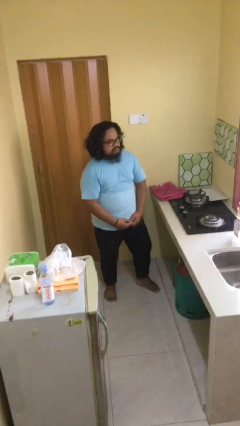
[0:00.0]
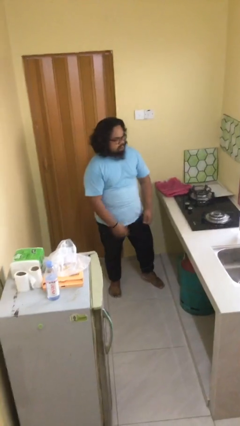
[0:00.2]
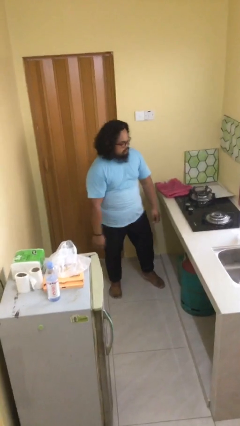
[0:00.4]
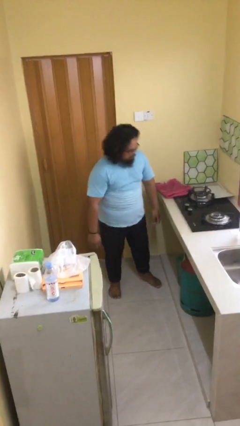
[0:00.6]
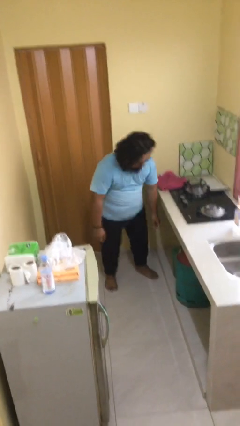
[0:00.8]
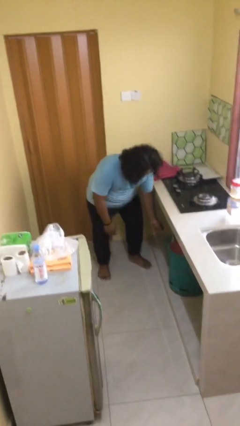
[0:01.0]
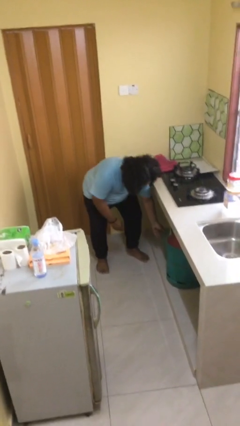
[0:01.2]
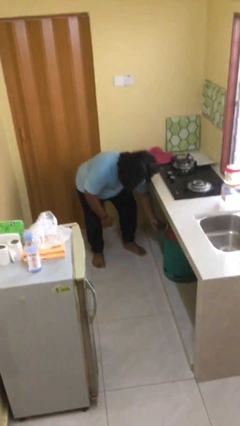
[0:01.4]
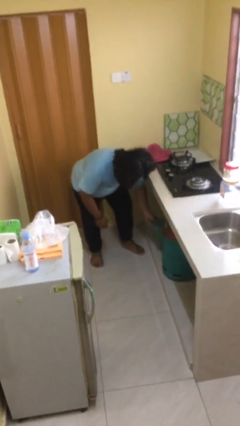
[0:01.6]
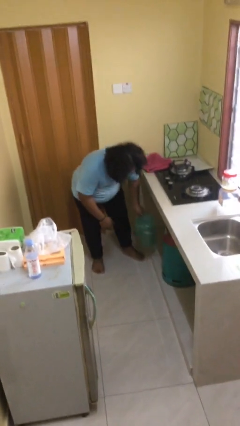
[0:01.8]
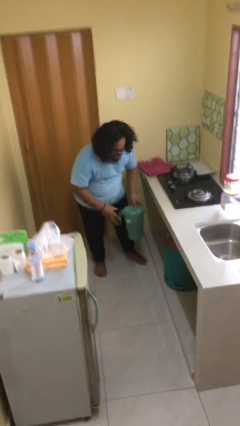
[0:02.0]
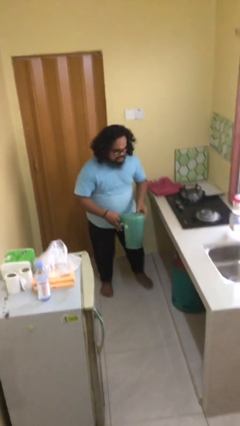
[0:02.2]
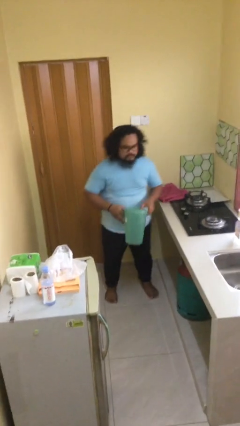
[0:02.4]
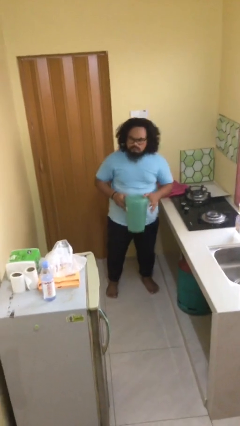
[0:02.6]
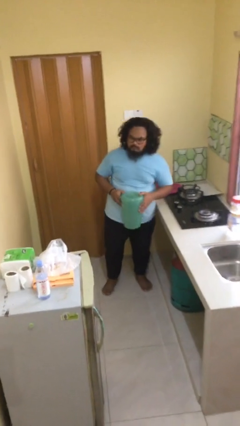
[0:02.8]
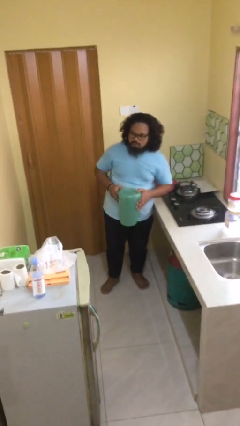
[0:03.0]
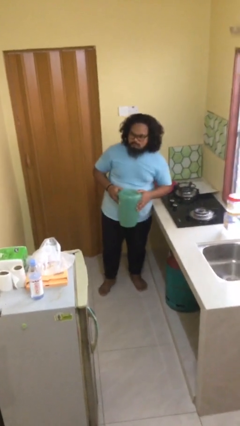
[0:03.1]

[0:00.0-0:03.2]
person picks up object from cabinet

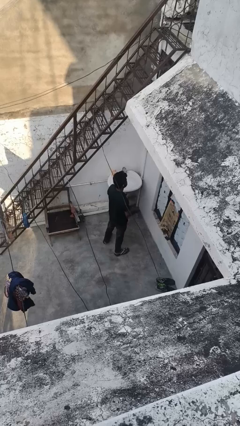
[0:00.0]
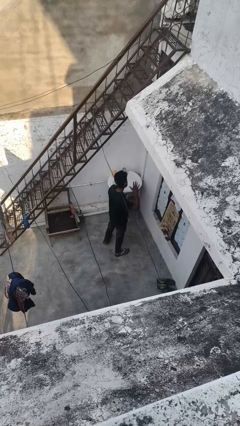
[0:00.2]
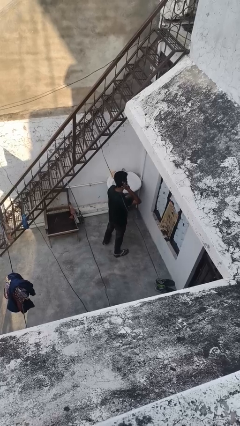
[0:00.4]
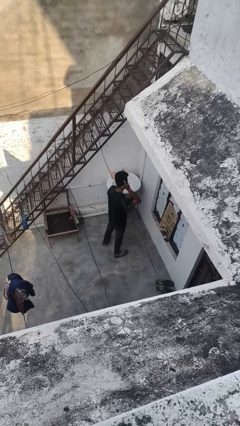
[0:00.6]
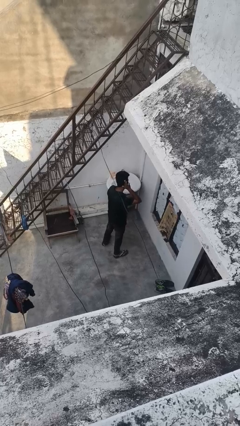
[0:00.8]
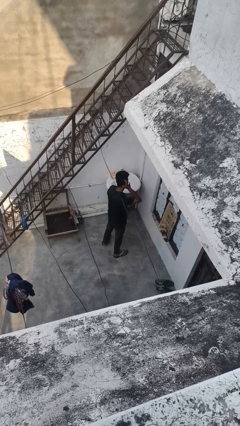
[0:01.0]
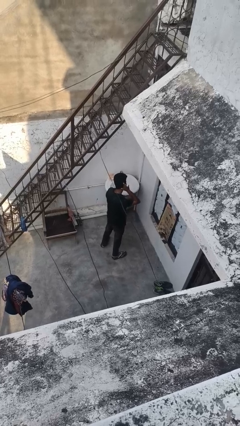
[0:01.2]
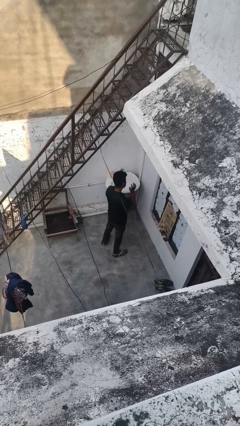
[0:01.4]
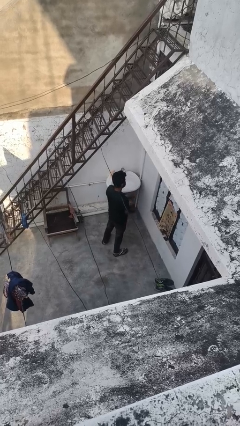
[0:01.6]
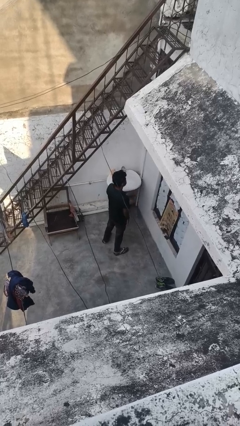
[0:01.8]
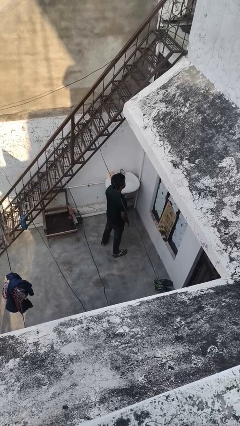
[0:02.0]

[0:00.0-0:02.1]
person gestures listen closely

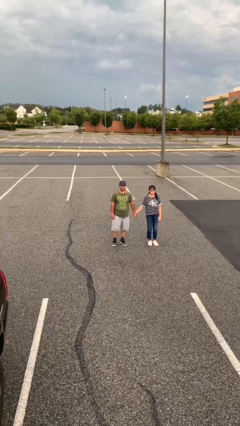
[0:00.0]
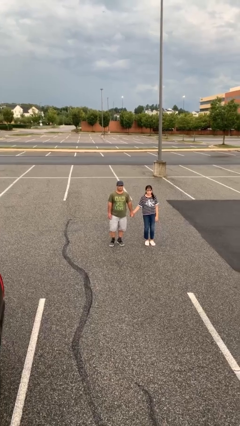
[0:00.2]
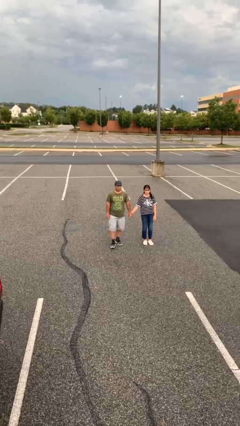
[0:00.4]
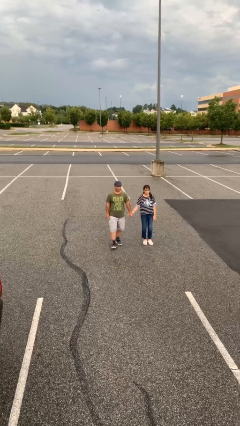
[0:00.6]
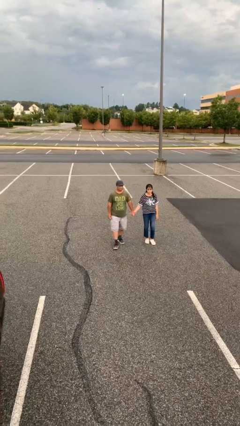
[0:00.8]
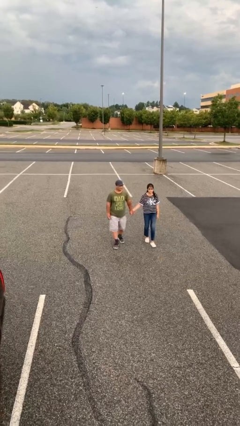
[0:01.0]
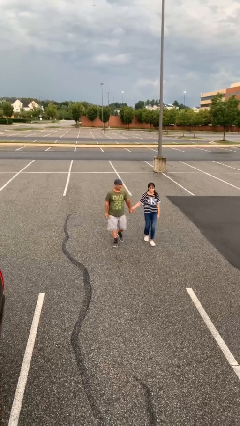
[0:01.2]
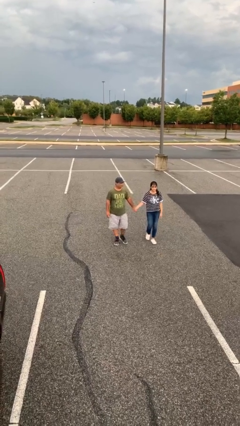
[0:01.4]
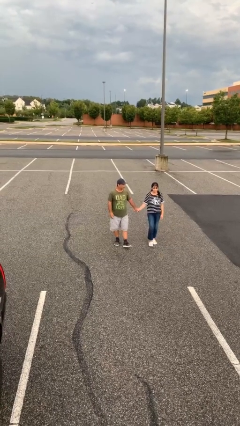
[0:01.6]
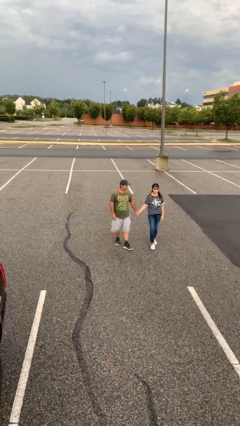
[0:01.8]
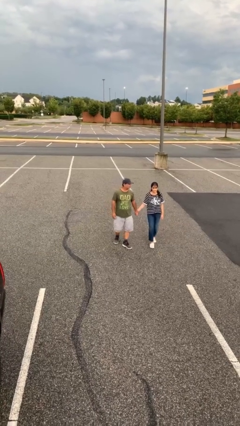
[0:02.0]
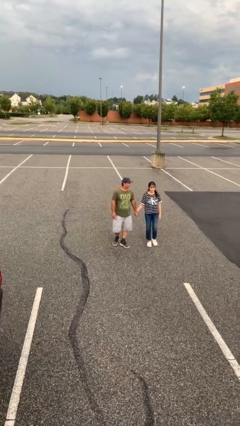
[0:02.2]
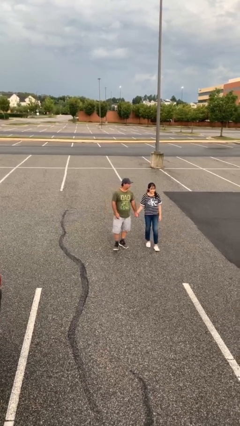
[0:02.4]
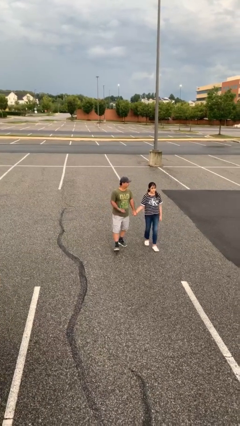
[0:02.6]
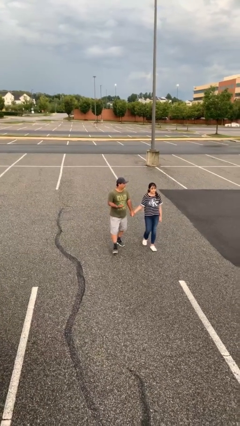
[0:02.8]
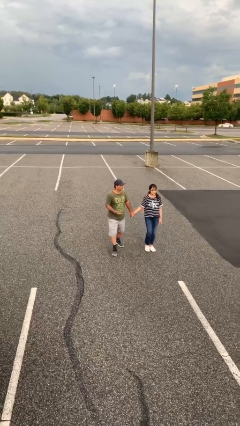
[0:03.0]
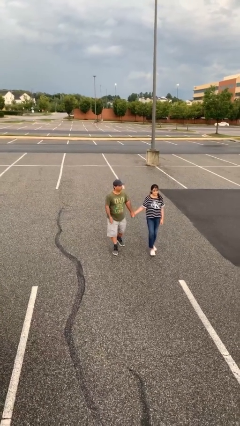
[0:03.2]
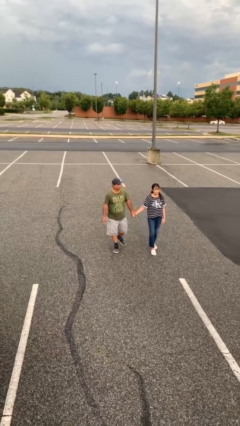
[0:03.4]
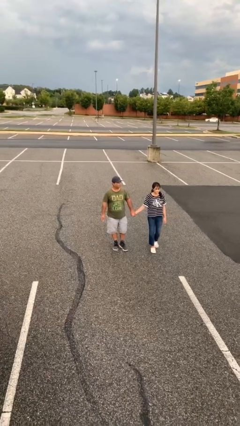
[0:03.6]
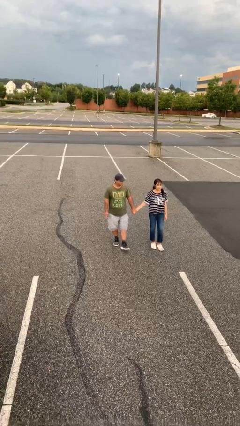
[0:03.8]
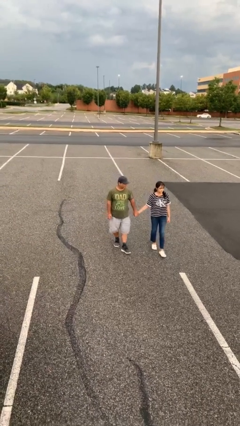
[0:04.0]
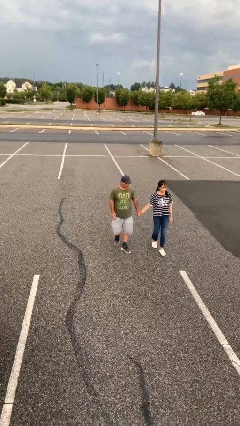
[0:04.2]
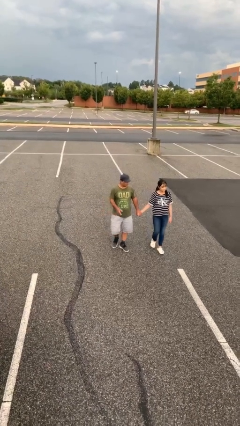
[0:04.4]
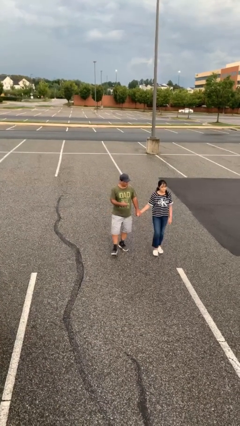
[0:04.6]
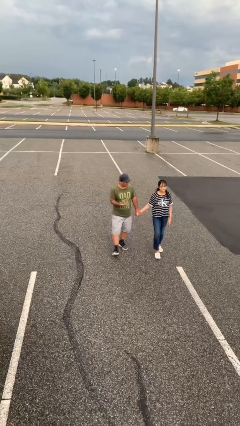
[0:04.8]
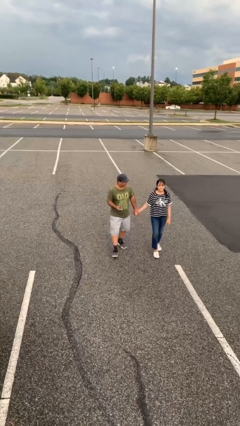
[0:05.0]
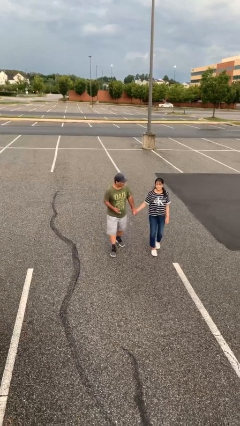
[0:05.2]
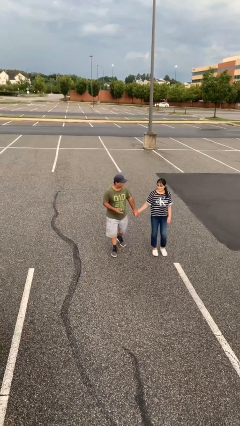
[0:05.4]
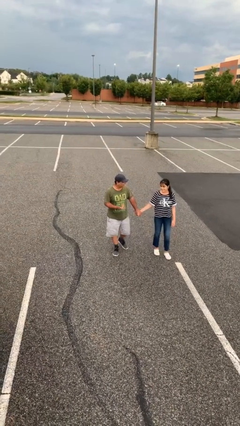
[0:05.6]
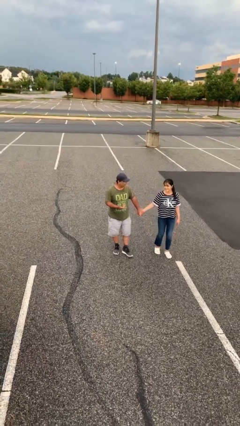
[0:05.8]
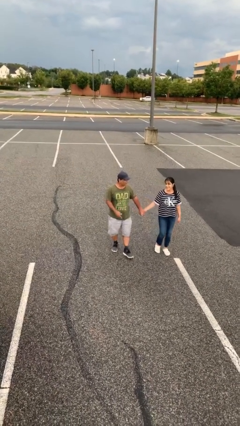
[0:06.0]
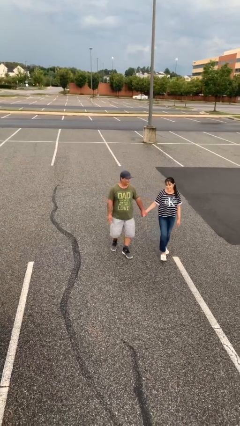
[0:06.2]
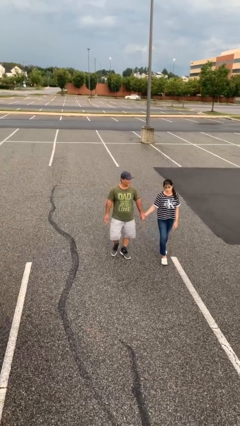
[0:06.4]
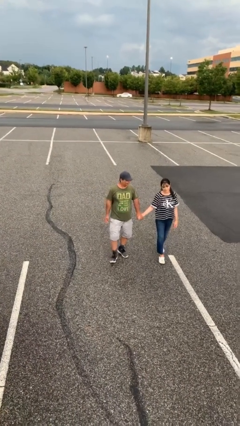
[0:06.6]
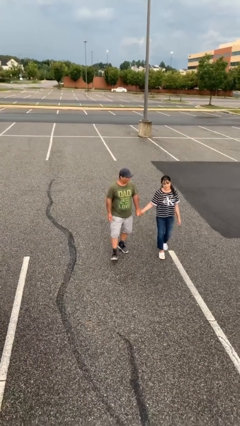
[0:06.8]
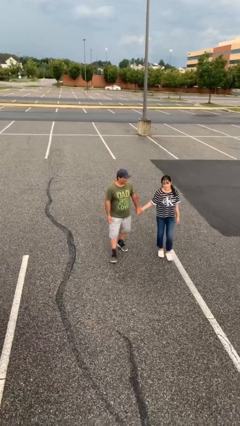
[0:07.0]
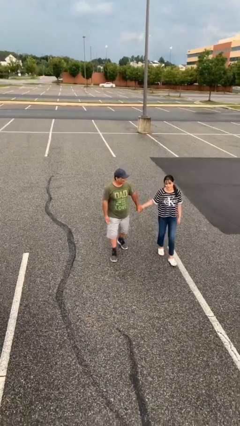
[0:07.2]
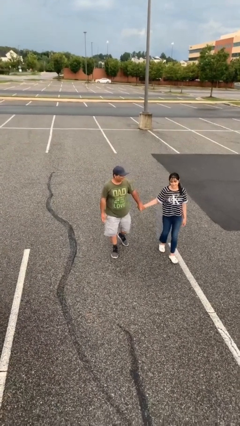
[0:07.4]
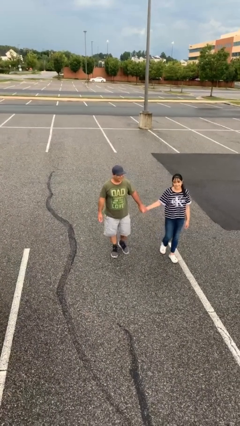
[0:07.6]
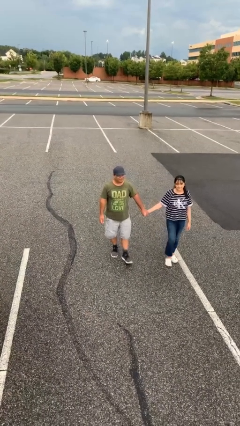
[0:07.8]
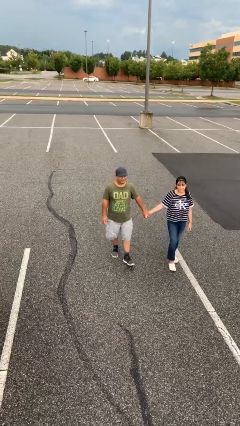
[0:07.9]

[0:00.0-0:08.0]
person holds hand

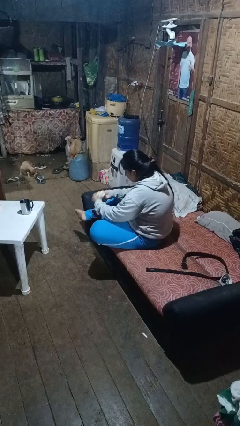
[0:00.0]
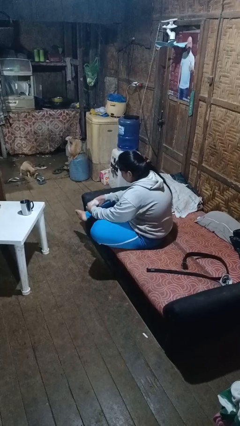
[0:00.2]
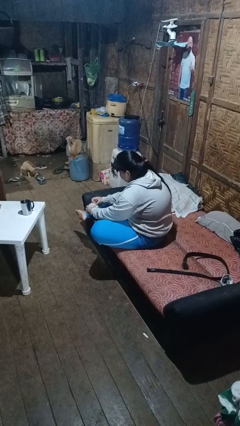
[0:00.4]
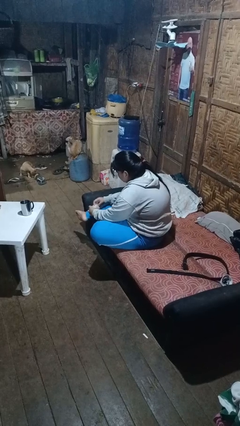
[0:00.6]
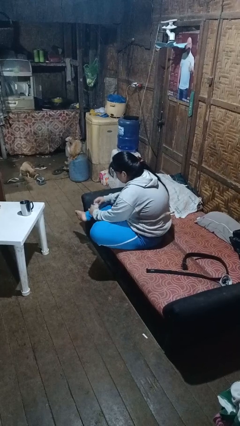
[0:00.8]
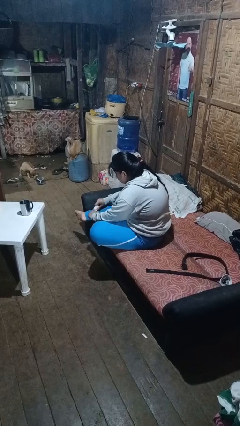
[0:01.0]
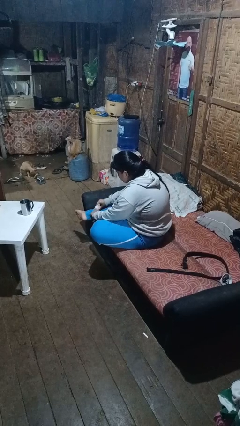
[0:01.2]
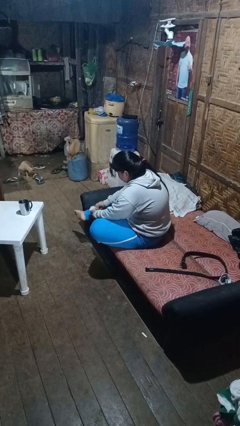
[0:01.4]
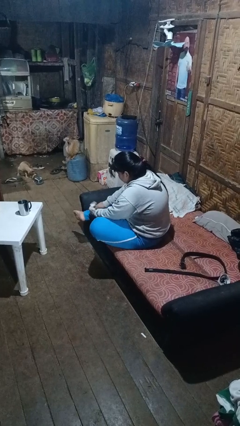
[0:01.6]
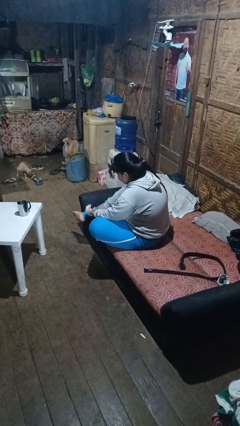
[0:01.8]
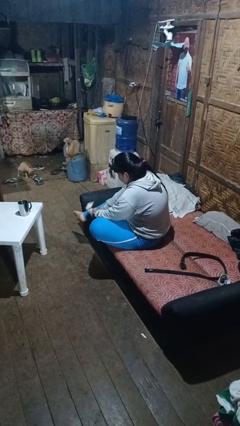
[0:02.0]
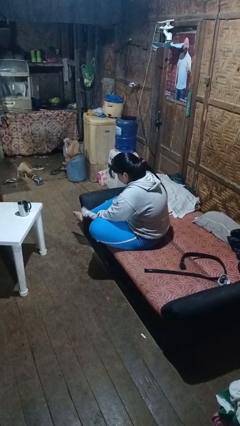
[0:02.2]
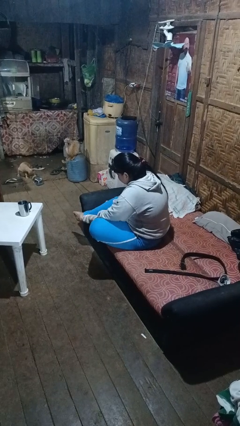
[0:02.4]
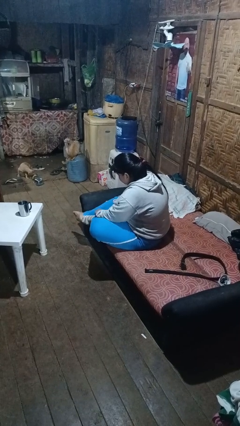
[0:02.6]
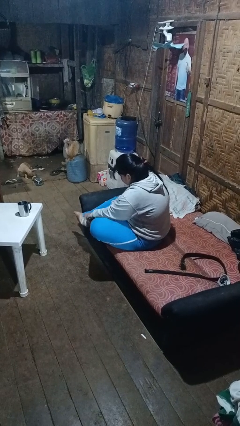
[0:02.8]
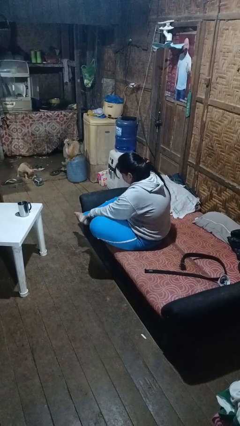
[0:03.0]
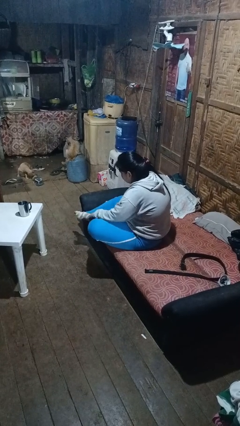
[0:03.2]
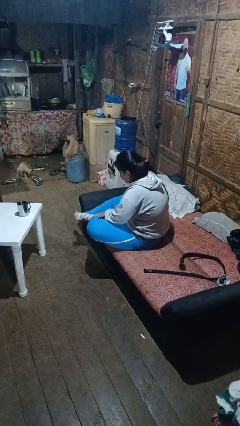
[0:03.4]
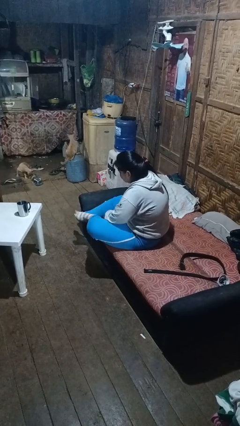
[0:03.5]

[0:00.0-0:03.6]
person puts on socks

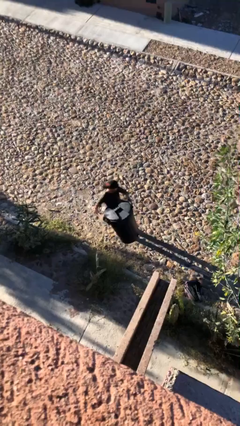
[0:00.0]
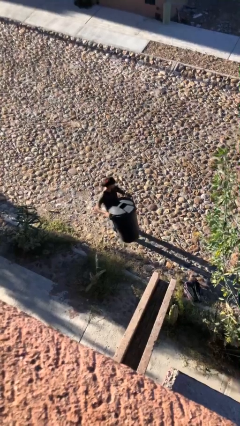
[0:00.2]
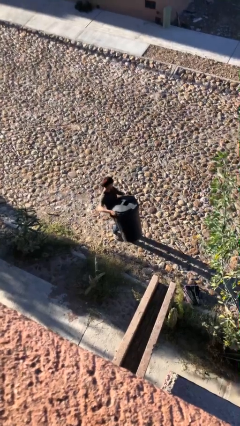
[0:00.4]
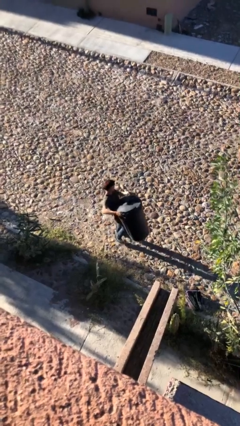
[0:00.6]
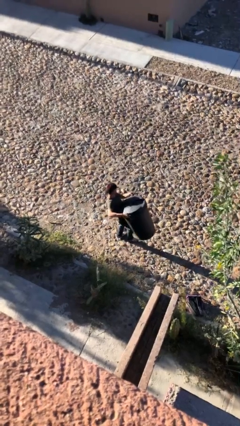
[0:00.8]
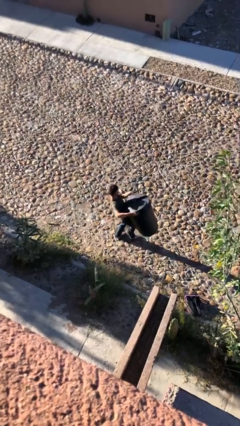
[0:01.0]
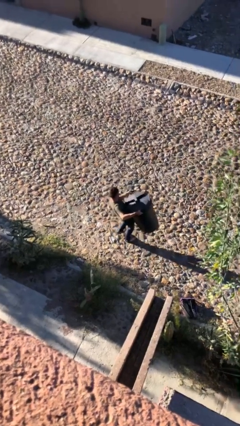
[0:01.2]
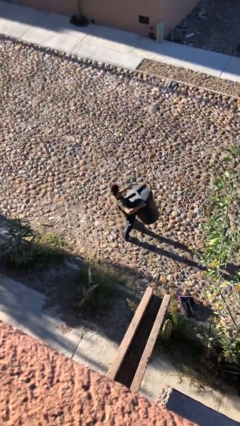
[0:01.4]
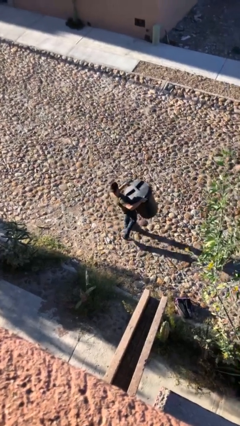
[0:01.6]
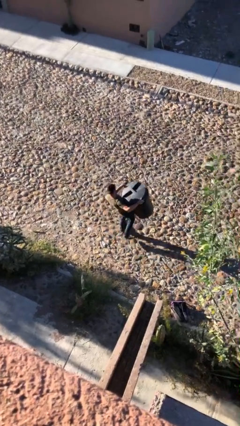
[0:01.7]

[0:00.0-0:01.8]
person carries heavy object
